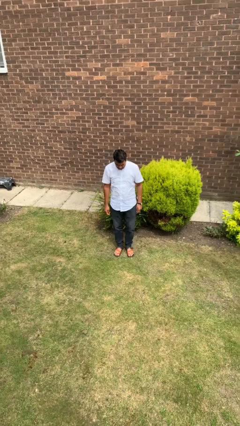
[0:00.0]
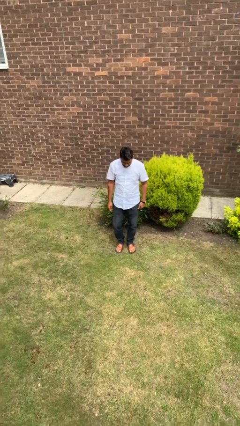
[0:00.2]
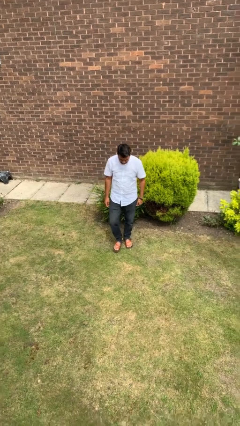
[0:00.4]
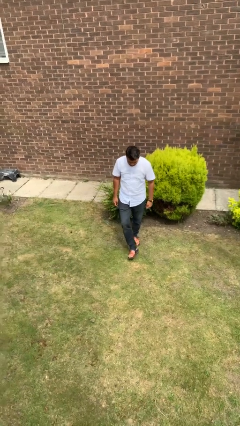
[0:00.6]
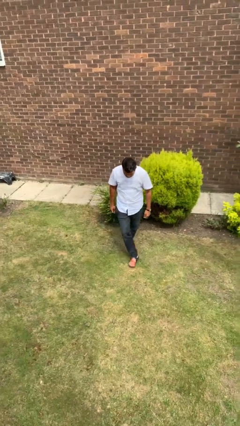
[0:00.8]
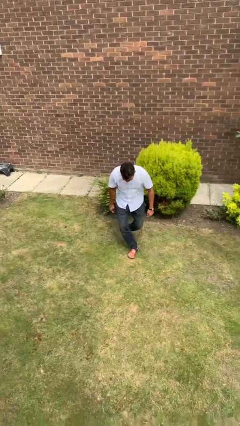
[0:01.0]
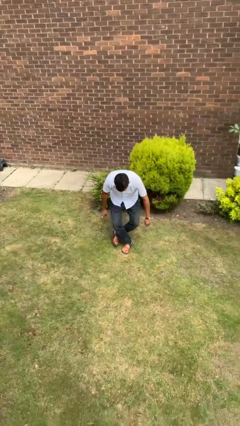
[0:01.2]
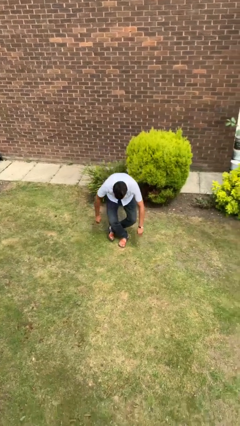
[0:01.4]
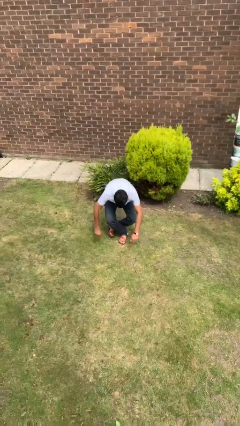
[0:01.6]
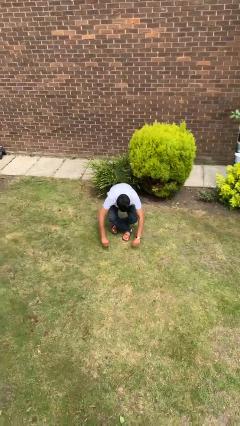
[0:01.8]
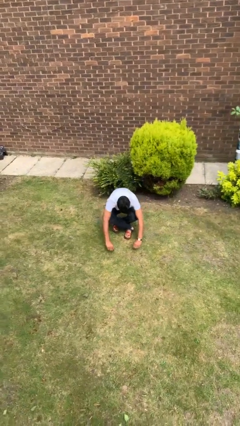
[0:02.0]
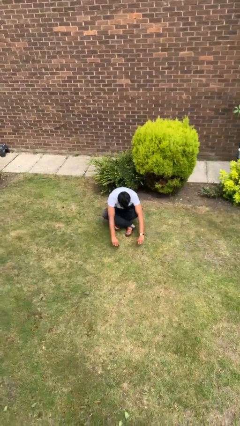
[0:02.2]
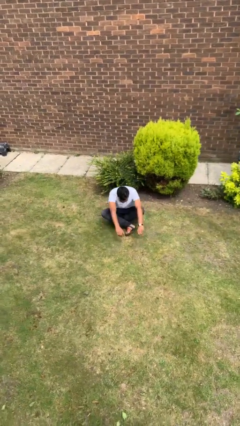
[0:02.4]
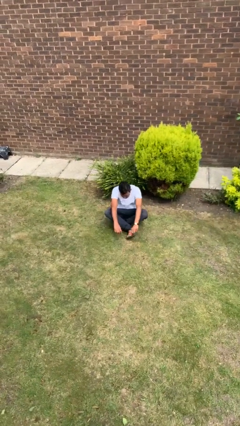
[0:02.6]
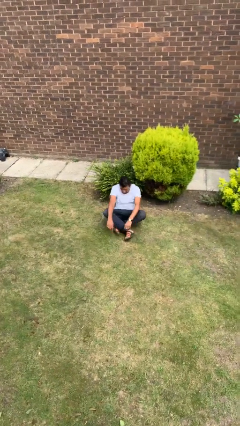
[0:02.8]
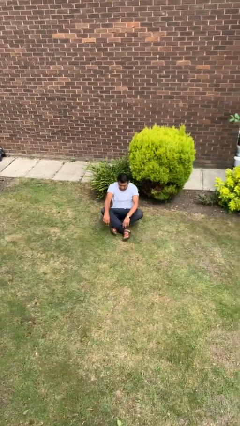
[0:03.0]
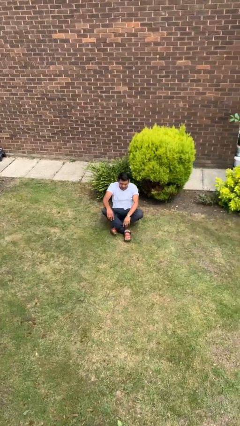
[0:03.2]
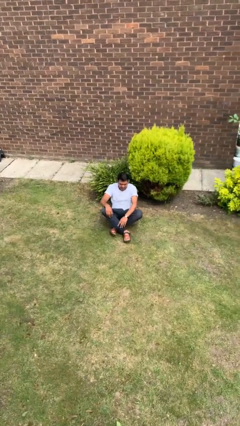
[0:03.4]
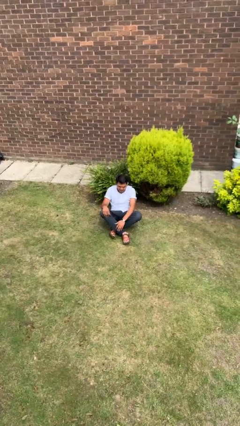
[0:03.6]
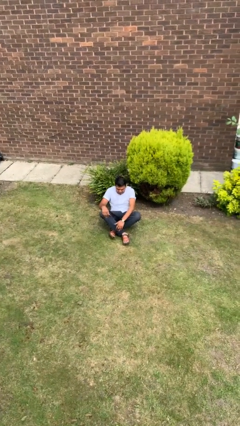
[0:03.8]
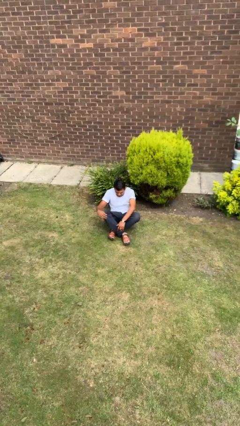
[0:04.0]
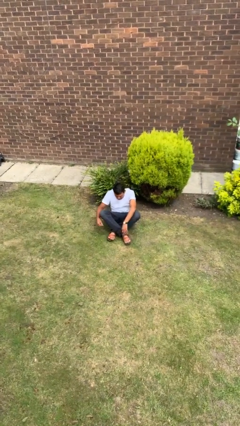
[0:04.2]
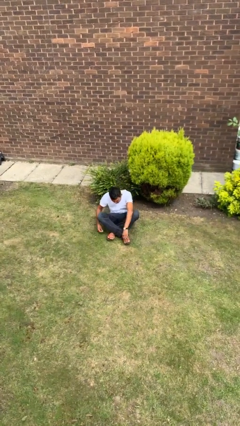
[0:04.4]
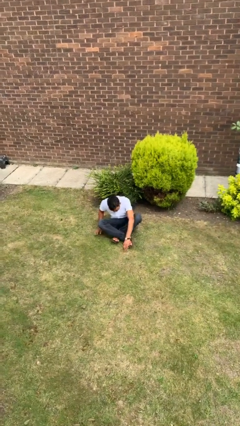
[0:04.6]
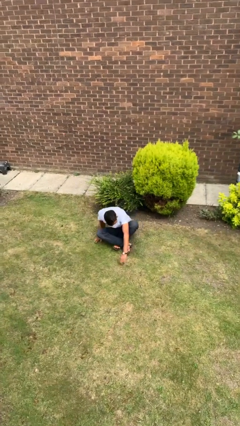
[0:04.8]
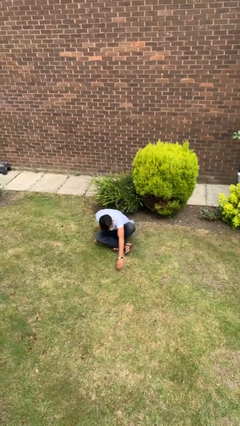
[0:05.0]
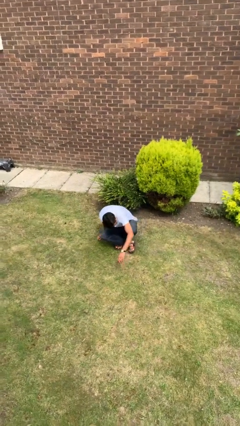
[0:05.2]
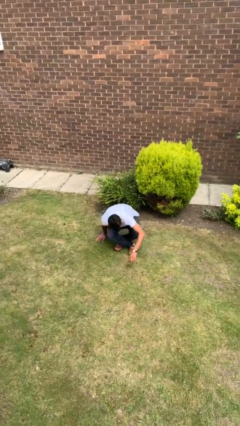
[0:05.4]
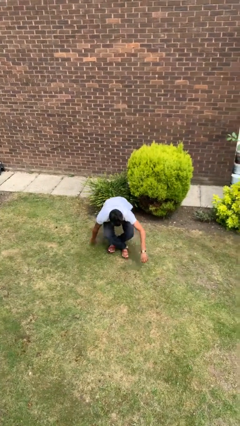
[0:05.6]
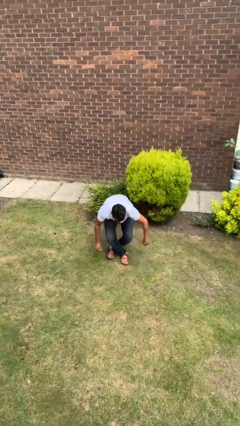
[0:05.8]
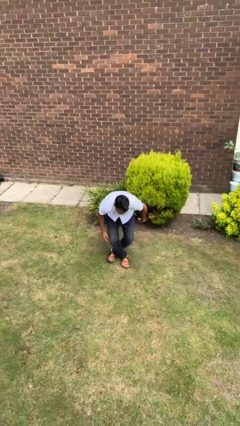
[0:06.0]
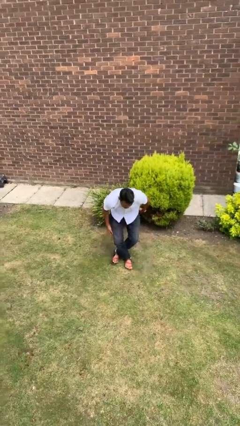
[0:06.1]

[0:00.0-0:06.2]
person sits crisscross

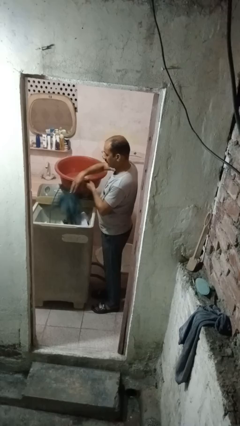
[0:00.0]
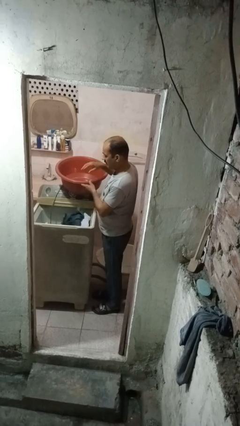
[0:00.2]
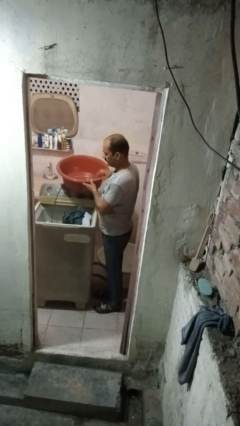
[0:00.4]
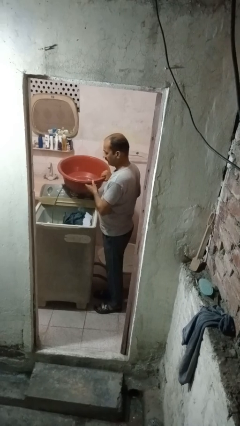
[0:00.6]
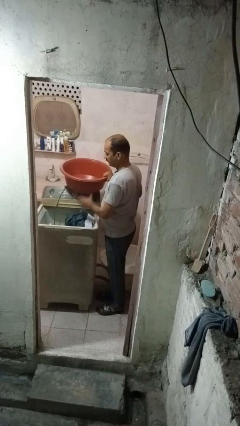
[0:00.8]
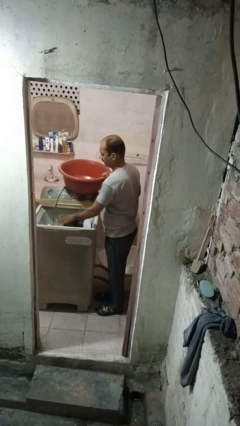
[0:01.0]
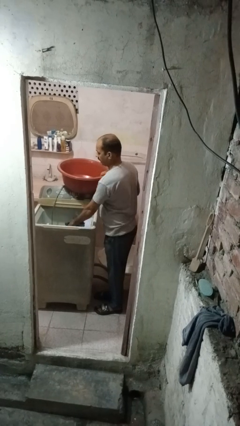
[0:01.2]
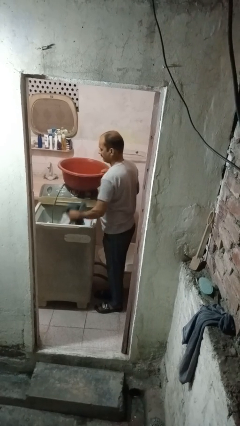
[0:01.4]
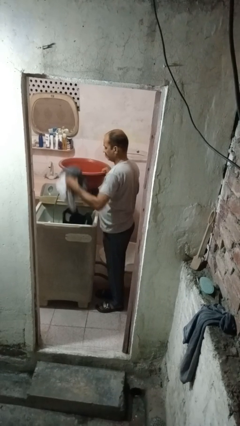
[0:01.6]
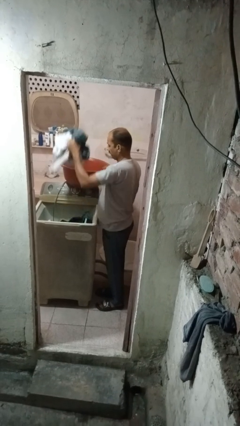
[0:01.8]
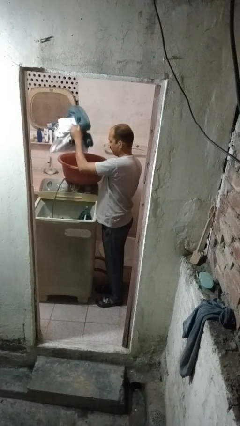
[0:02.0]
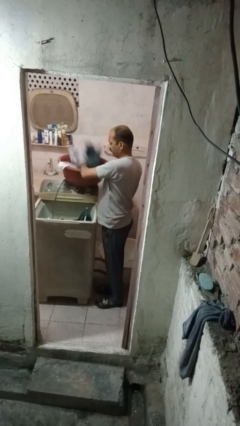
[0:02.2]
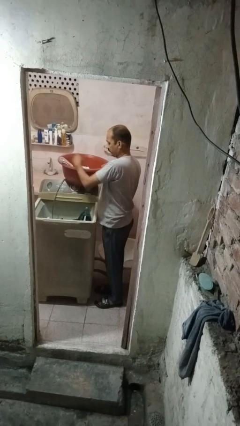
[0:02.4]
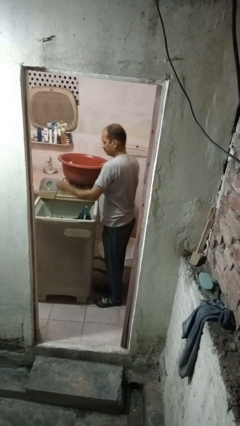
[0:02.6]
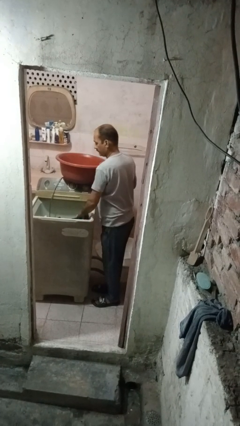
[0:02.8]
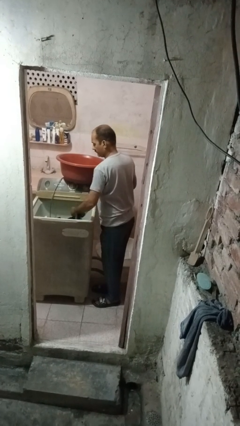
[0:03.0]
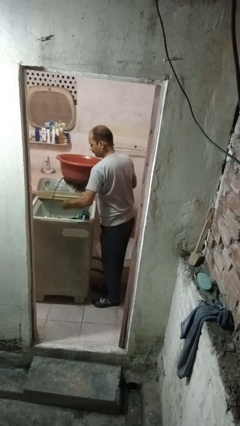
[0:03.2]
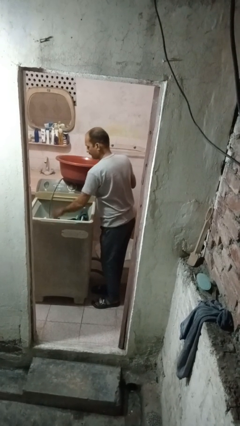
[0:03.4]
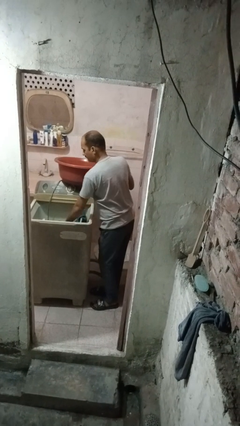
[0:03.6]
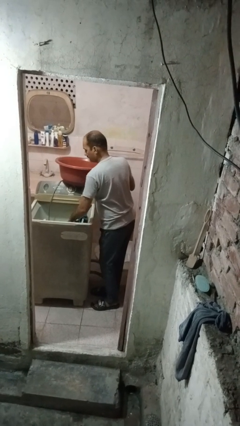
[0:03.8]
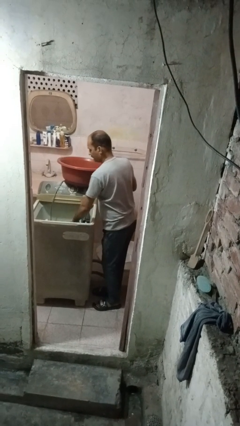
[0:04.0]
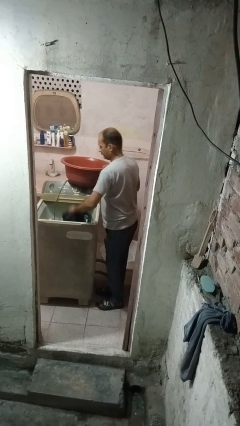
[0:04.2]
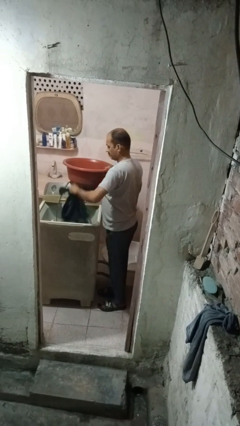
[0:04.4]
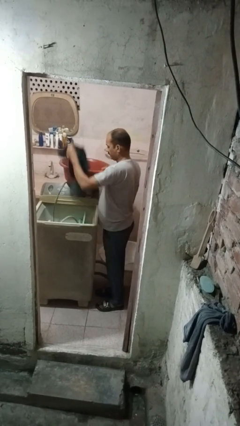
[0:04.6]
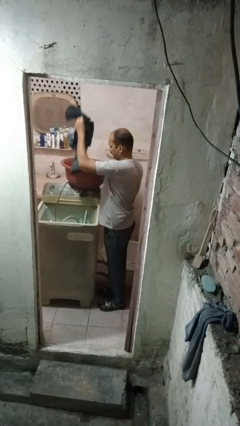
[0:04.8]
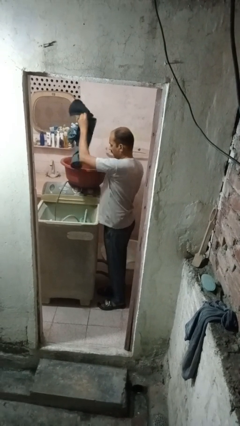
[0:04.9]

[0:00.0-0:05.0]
person unloads dishwasher

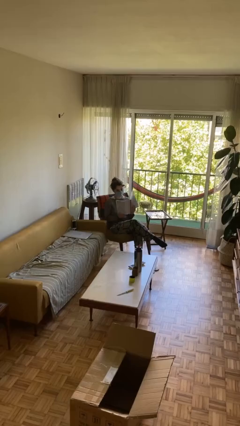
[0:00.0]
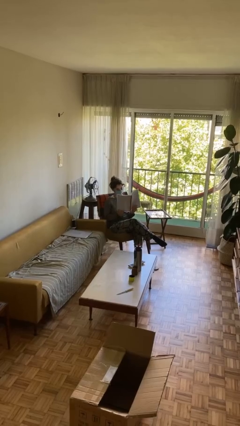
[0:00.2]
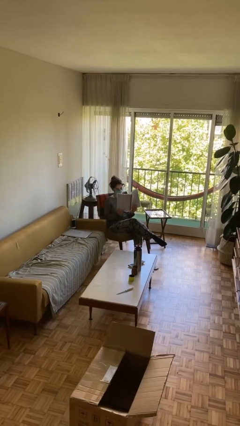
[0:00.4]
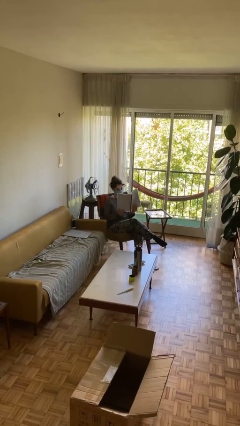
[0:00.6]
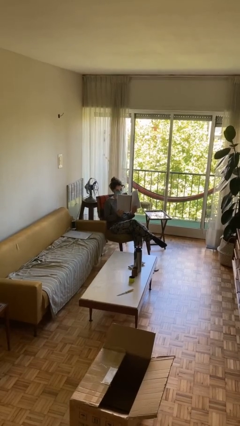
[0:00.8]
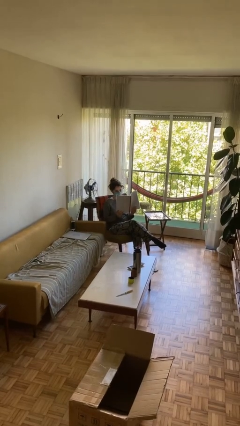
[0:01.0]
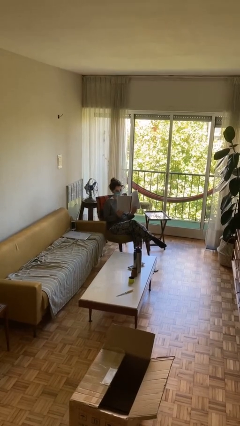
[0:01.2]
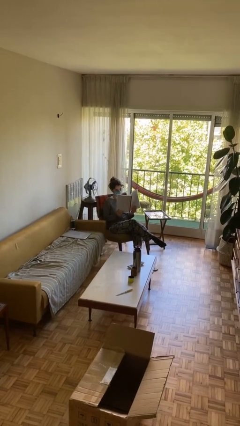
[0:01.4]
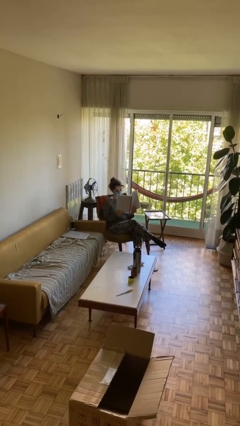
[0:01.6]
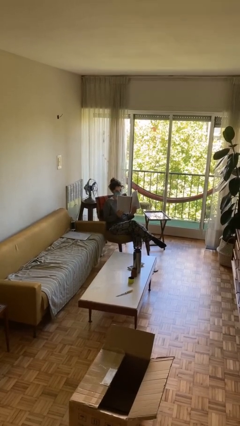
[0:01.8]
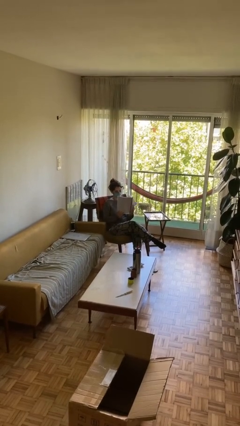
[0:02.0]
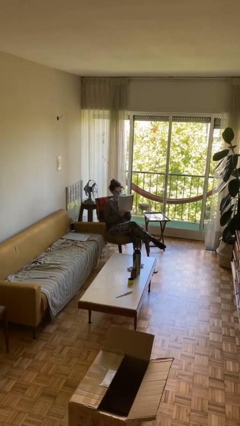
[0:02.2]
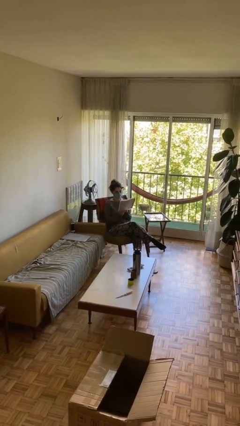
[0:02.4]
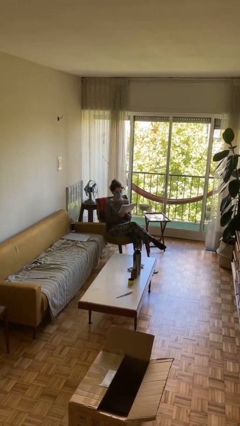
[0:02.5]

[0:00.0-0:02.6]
person reads document

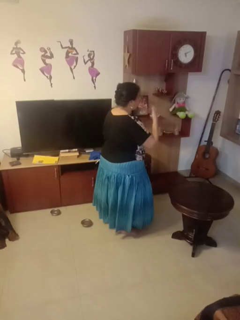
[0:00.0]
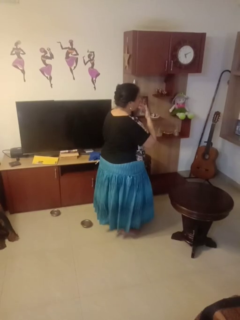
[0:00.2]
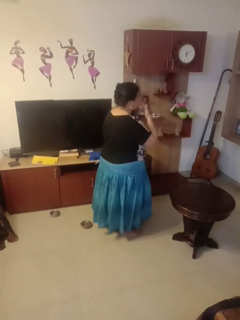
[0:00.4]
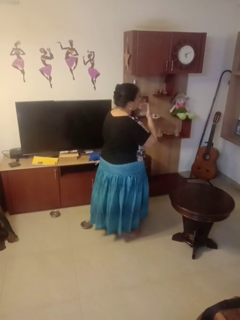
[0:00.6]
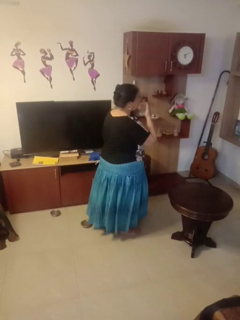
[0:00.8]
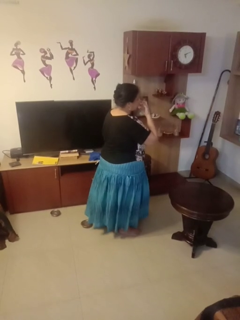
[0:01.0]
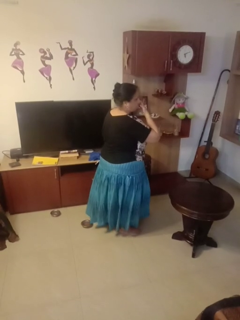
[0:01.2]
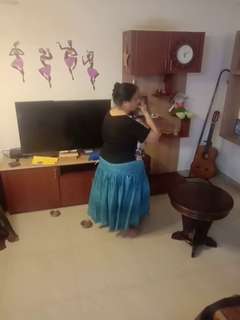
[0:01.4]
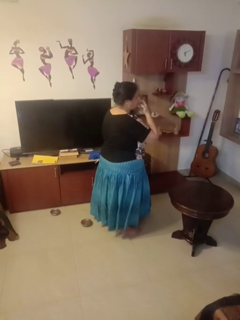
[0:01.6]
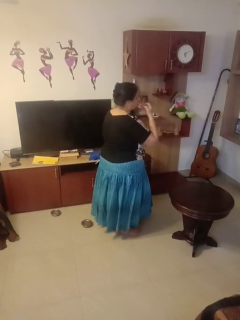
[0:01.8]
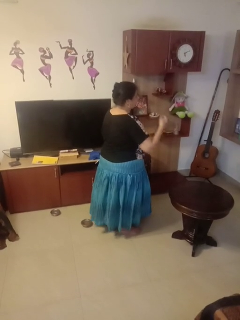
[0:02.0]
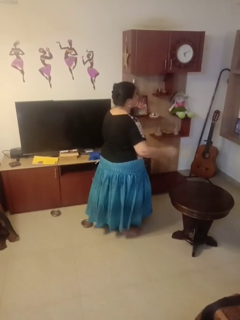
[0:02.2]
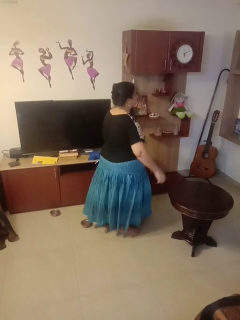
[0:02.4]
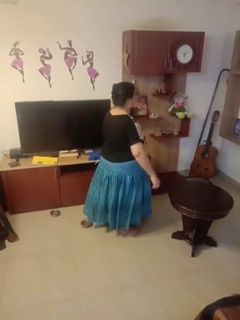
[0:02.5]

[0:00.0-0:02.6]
person licks fingers

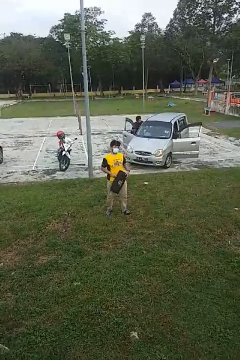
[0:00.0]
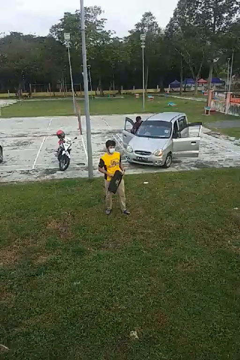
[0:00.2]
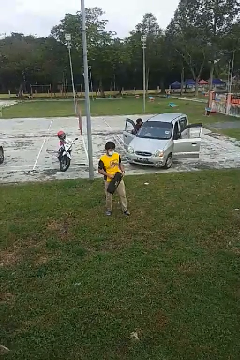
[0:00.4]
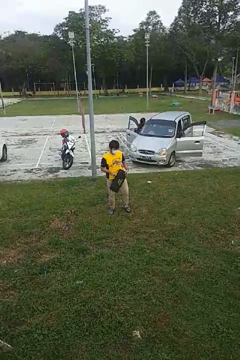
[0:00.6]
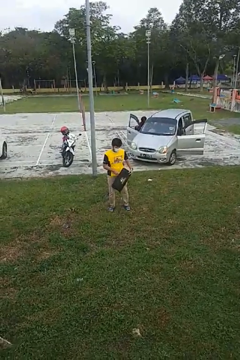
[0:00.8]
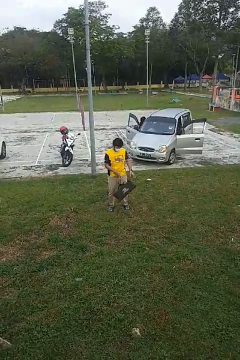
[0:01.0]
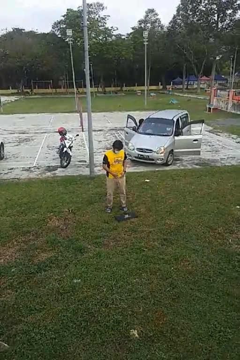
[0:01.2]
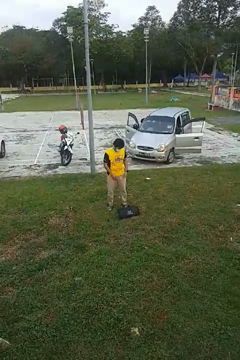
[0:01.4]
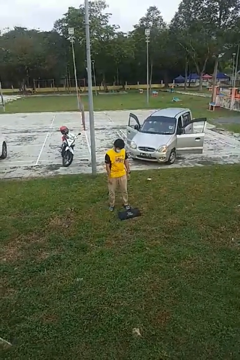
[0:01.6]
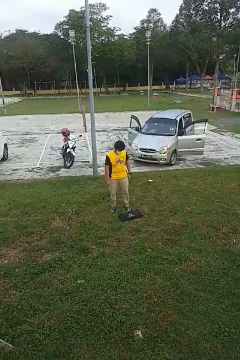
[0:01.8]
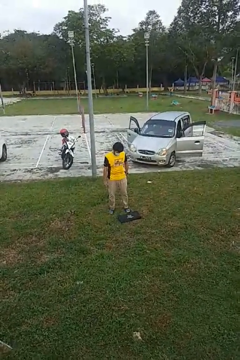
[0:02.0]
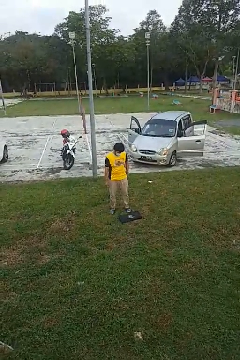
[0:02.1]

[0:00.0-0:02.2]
person drops object

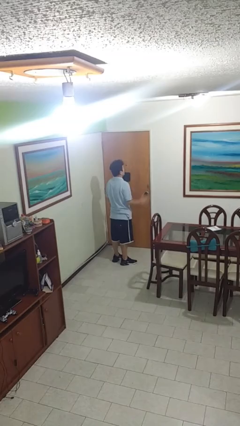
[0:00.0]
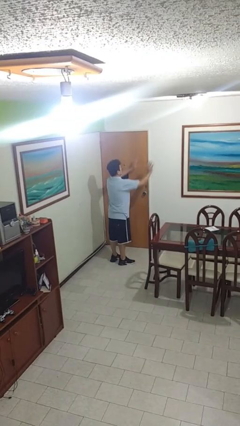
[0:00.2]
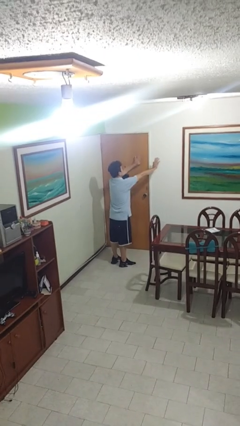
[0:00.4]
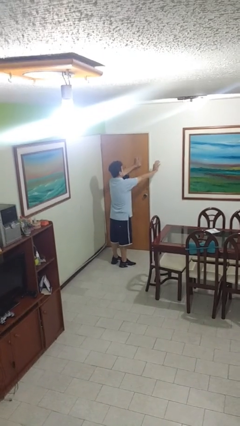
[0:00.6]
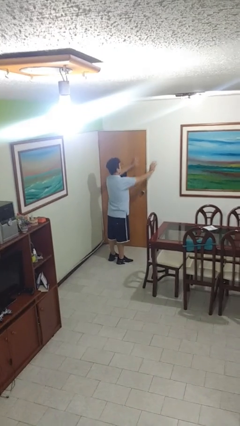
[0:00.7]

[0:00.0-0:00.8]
person gestures stop
